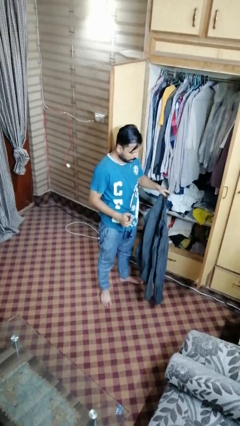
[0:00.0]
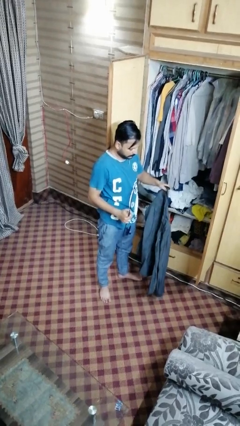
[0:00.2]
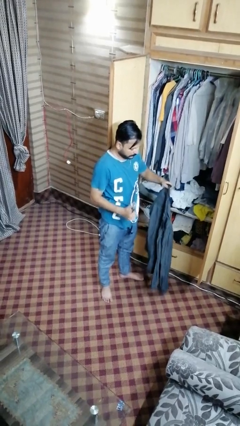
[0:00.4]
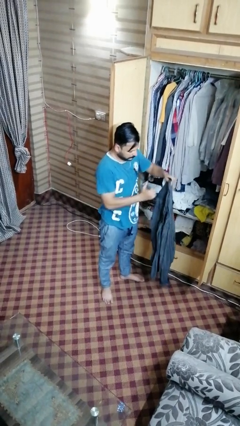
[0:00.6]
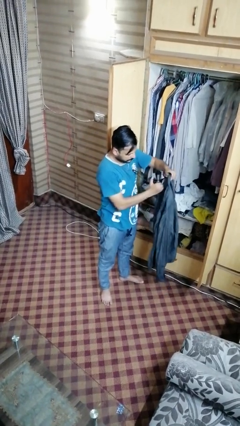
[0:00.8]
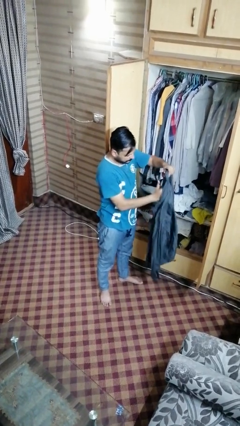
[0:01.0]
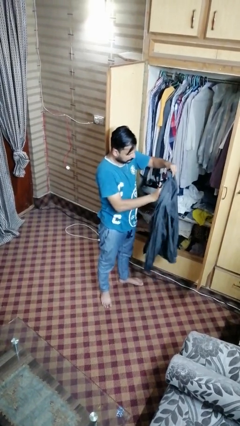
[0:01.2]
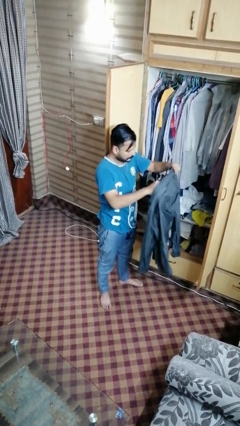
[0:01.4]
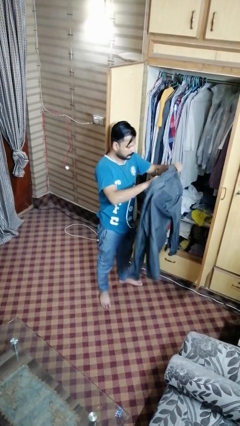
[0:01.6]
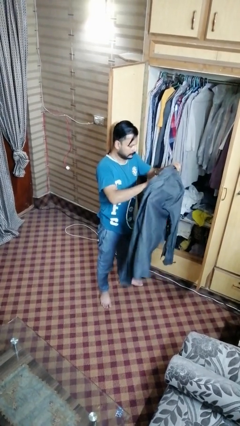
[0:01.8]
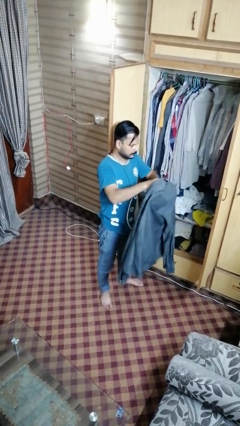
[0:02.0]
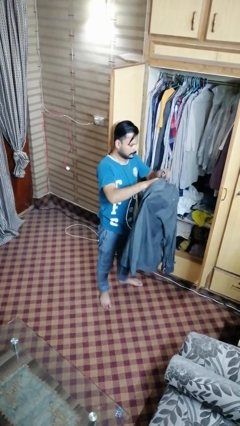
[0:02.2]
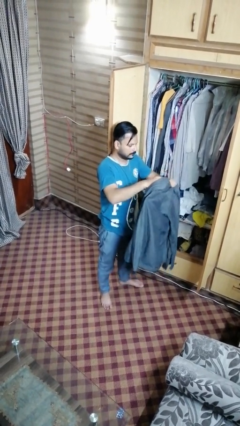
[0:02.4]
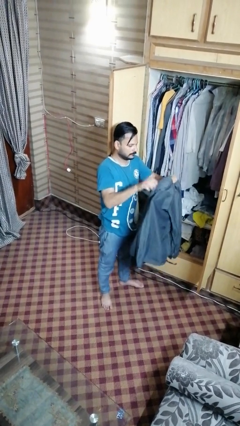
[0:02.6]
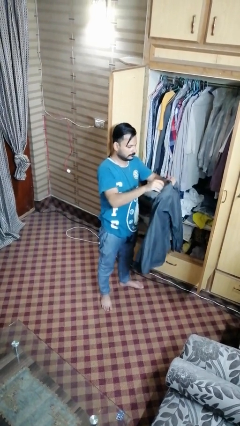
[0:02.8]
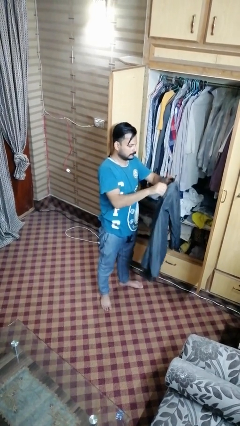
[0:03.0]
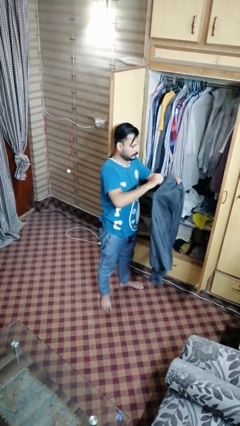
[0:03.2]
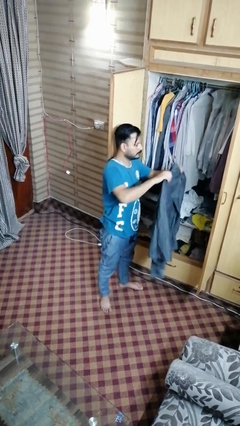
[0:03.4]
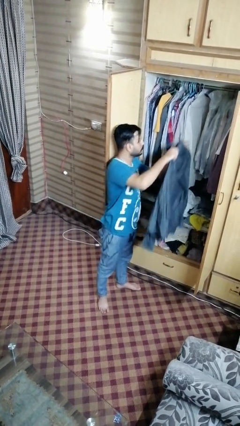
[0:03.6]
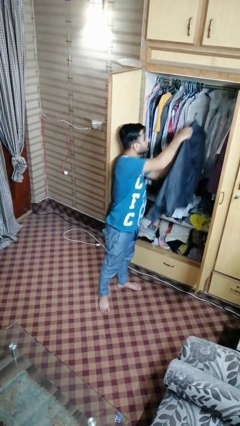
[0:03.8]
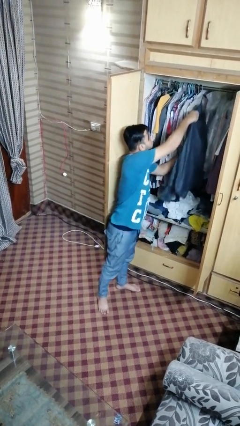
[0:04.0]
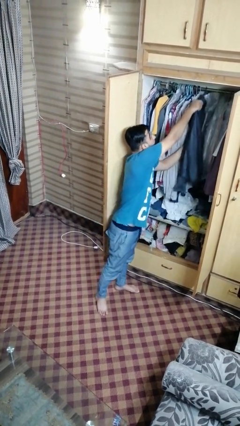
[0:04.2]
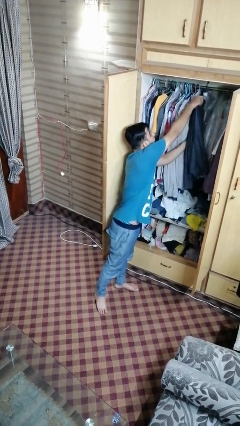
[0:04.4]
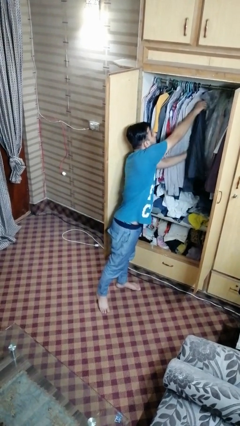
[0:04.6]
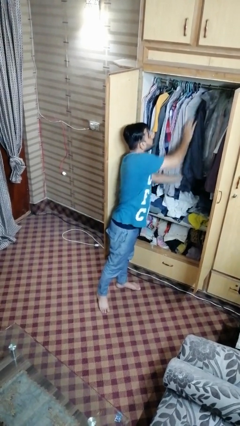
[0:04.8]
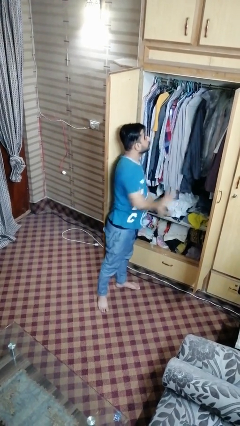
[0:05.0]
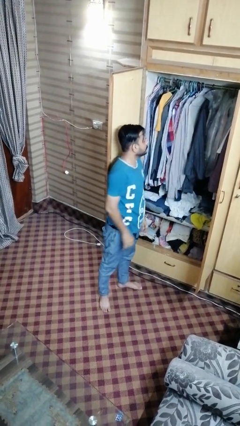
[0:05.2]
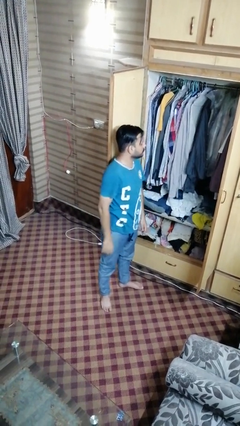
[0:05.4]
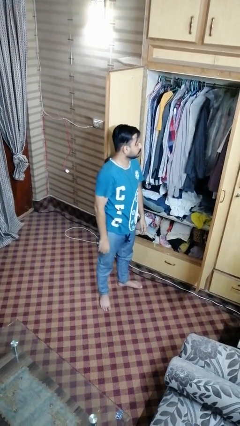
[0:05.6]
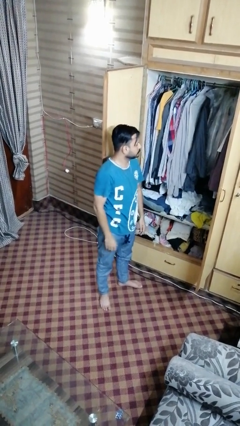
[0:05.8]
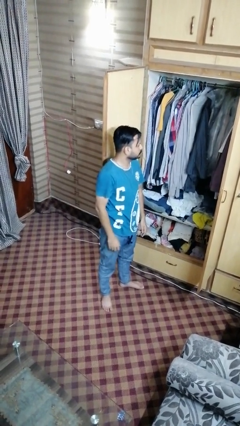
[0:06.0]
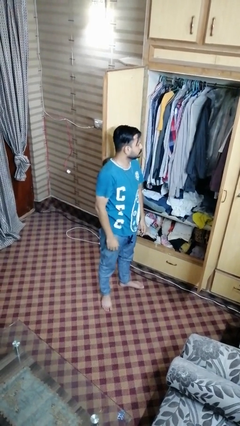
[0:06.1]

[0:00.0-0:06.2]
person puts clothes into dresser

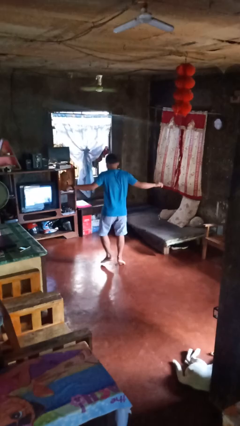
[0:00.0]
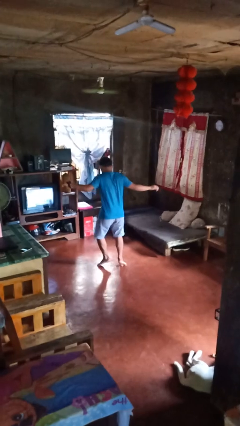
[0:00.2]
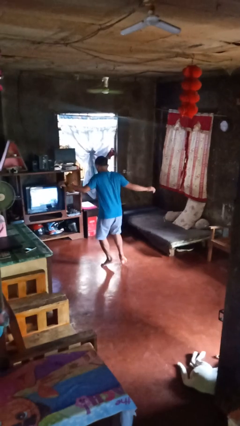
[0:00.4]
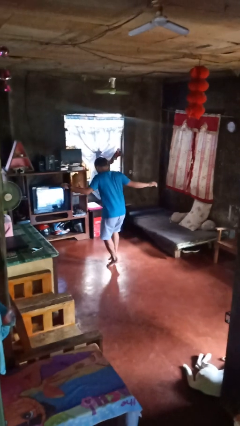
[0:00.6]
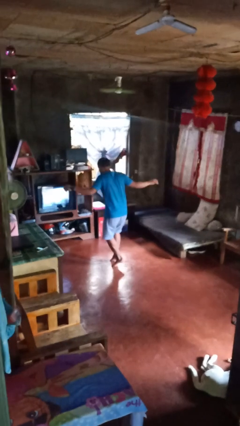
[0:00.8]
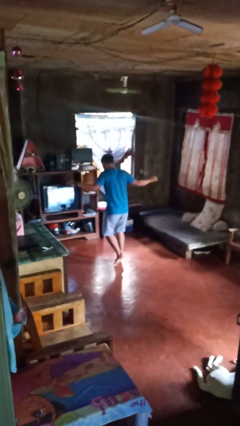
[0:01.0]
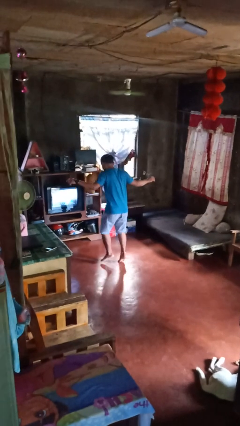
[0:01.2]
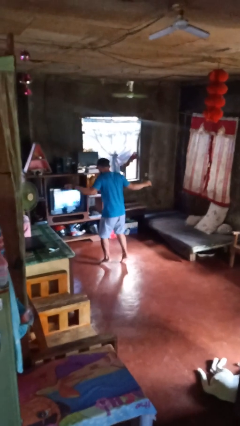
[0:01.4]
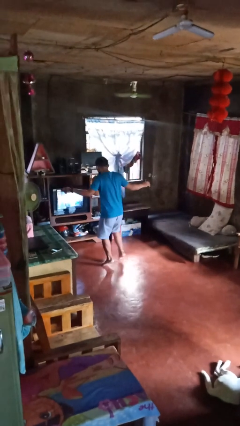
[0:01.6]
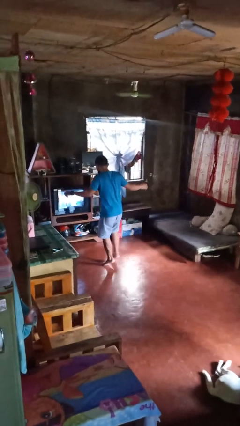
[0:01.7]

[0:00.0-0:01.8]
person walks tiptoe

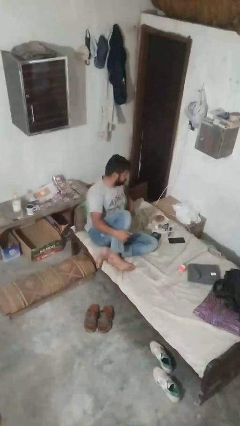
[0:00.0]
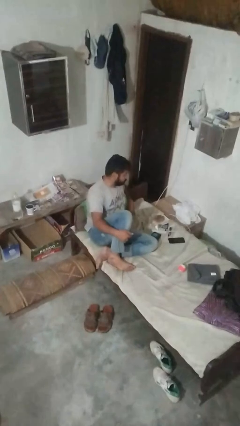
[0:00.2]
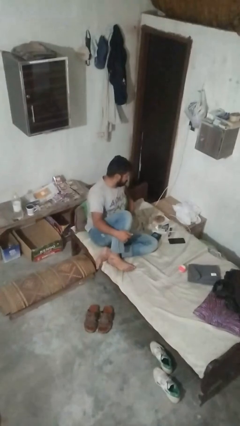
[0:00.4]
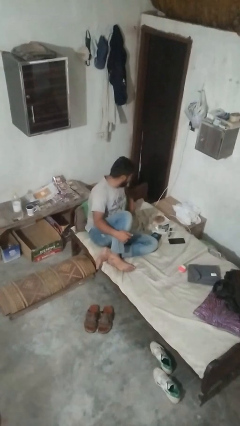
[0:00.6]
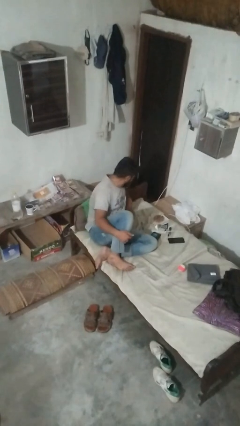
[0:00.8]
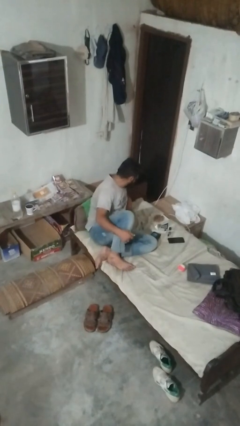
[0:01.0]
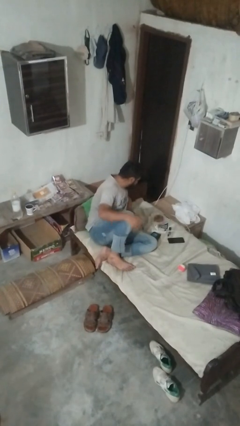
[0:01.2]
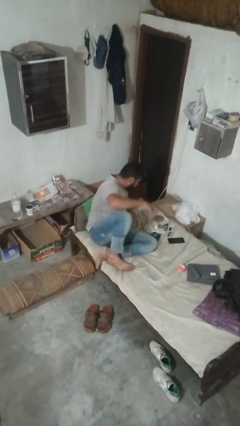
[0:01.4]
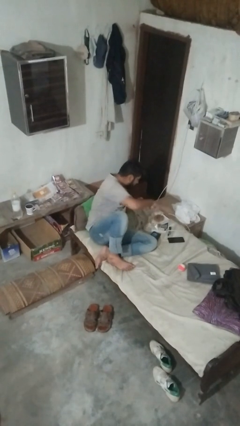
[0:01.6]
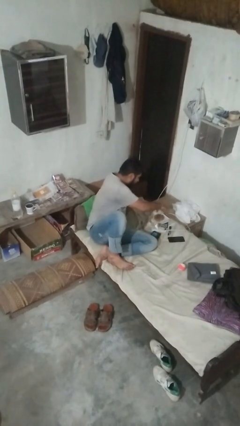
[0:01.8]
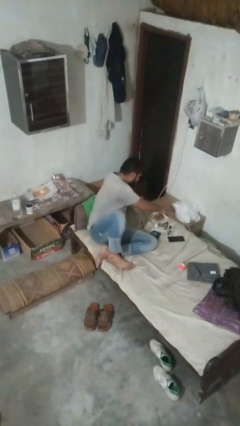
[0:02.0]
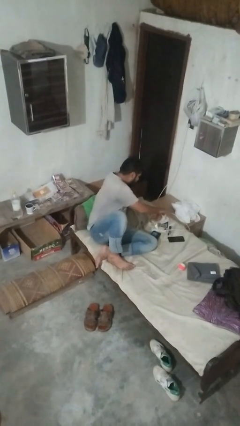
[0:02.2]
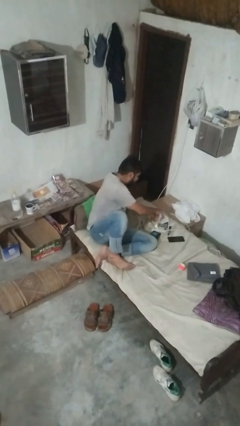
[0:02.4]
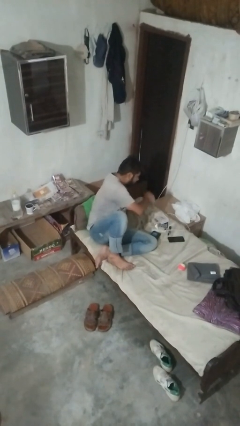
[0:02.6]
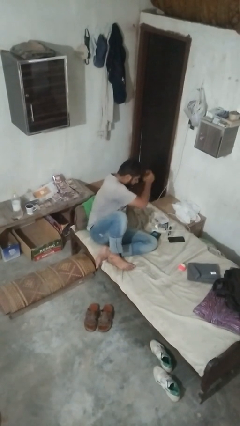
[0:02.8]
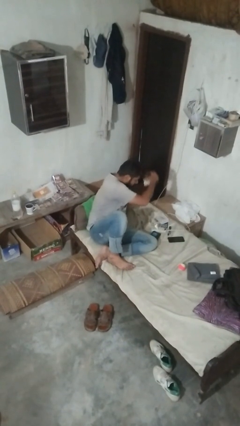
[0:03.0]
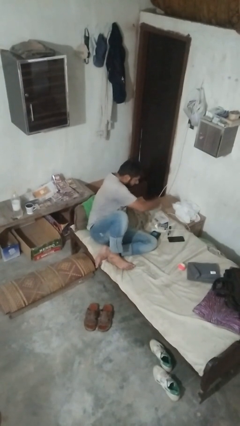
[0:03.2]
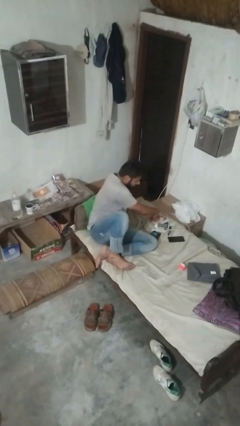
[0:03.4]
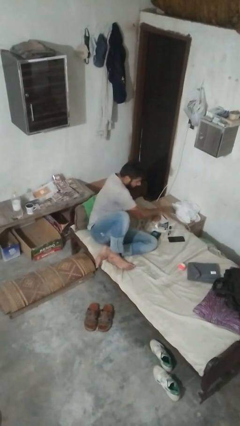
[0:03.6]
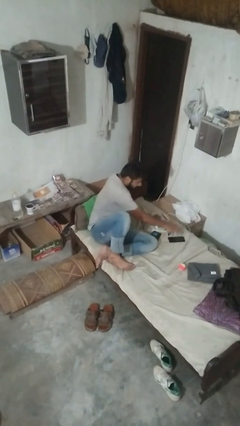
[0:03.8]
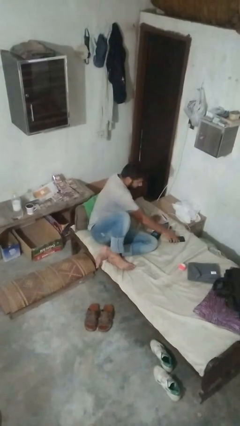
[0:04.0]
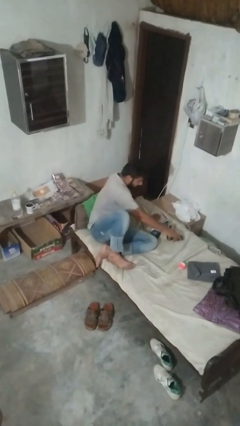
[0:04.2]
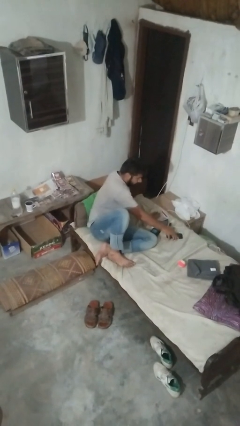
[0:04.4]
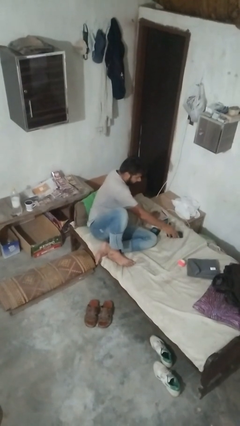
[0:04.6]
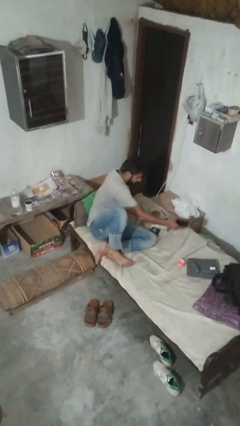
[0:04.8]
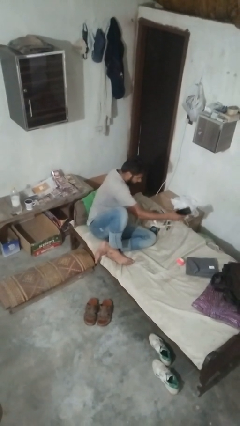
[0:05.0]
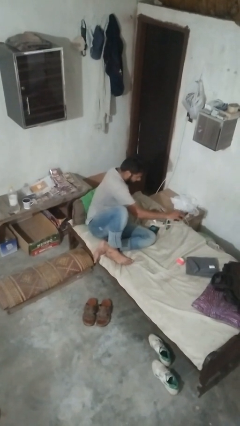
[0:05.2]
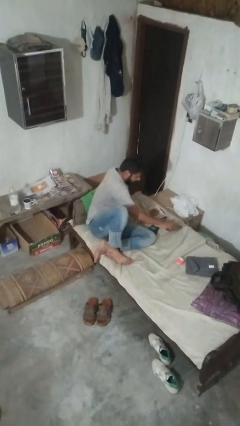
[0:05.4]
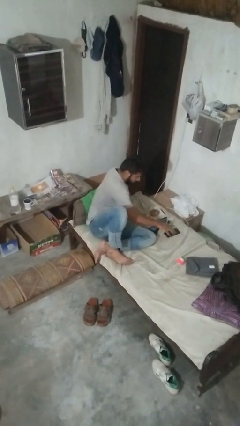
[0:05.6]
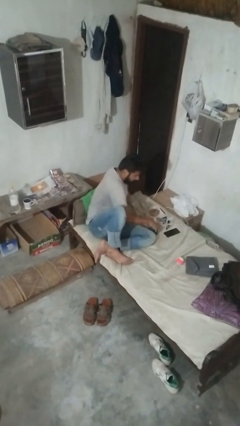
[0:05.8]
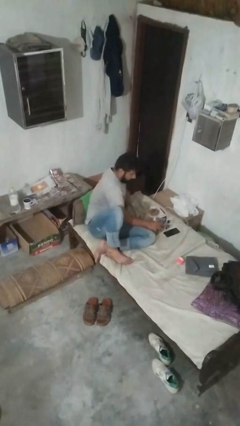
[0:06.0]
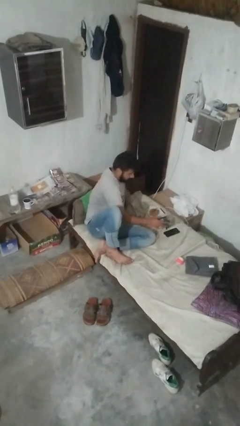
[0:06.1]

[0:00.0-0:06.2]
person searches under bed

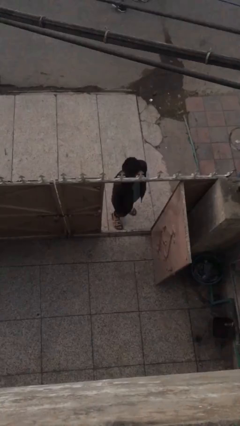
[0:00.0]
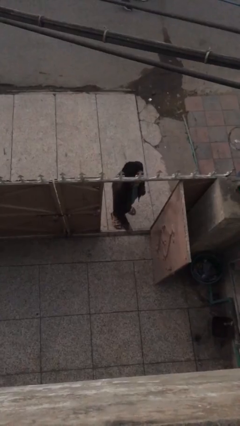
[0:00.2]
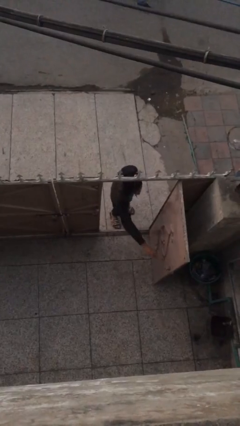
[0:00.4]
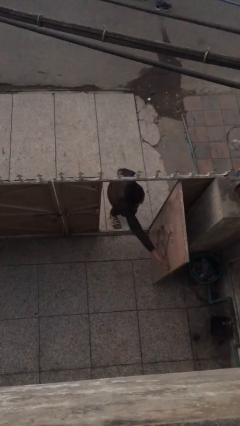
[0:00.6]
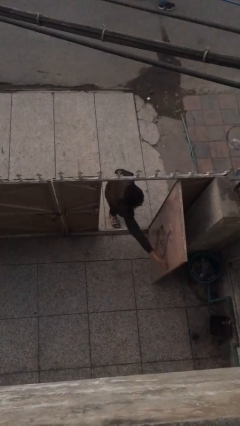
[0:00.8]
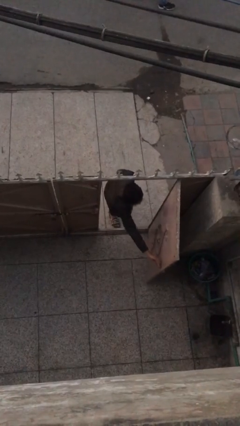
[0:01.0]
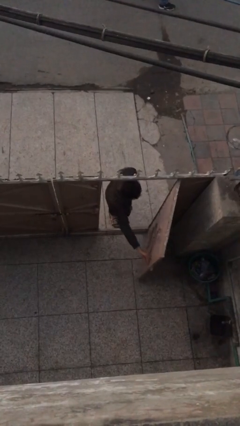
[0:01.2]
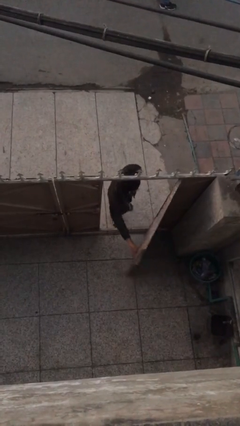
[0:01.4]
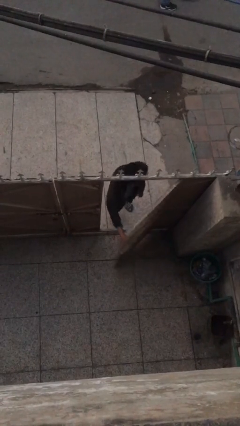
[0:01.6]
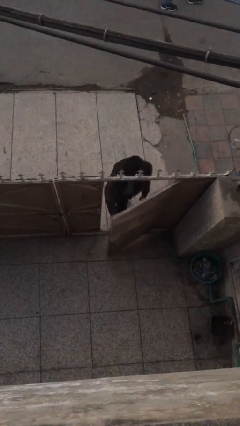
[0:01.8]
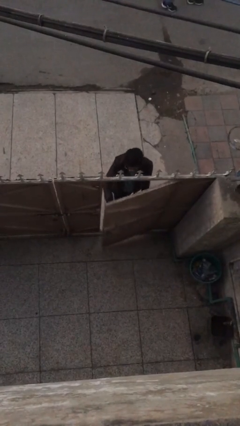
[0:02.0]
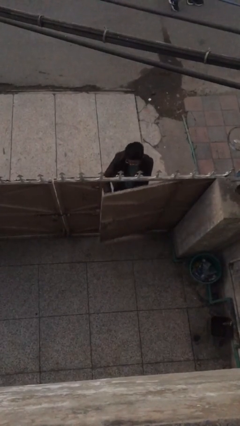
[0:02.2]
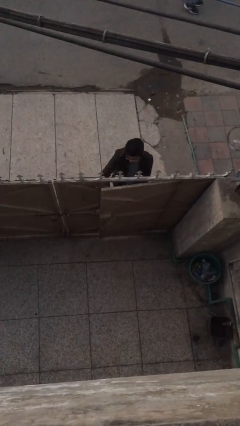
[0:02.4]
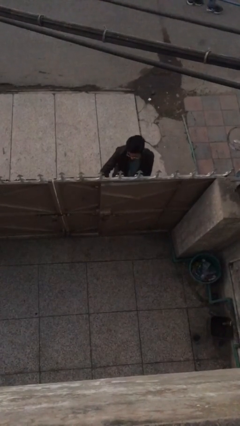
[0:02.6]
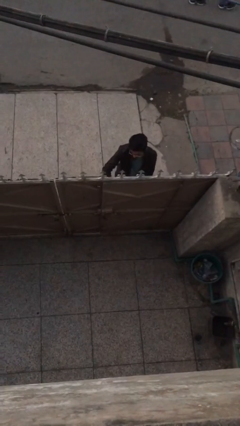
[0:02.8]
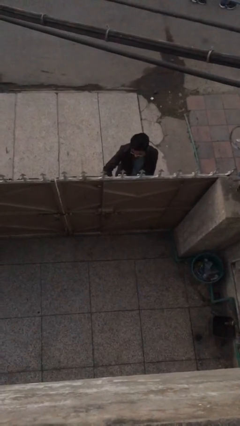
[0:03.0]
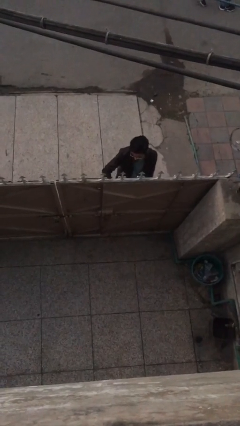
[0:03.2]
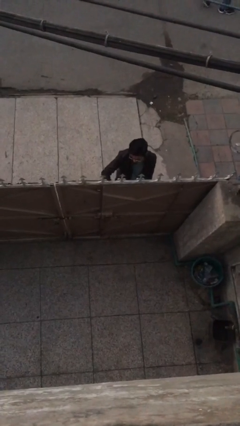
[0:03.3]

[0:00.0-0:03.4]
person closes facility door
